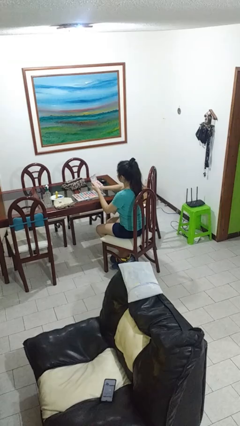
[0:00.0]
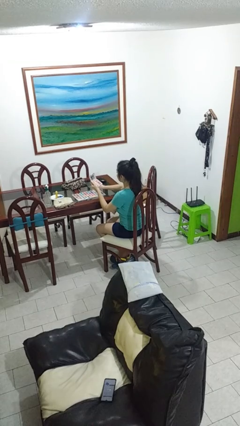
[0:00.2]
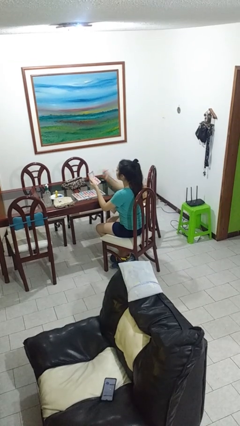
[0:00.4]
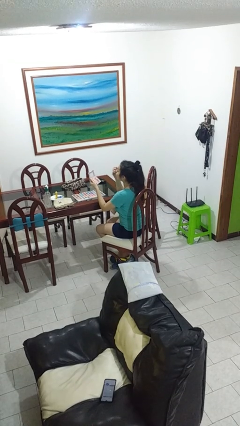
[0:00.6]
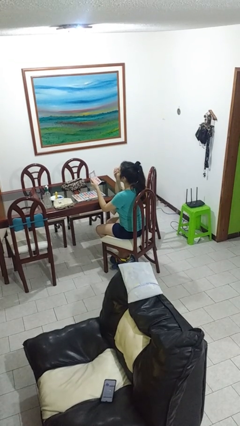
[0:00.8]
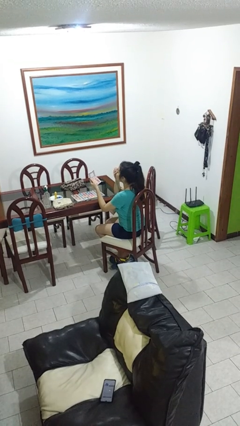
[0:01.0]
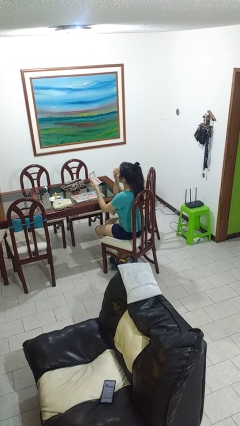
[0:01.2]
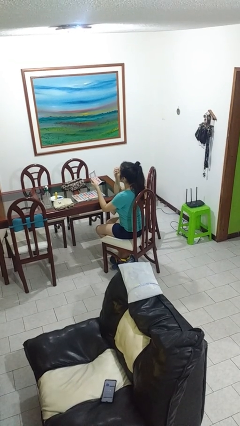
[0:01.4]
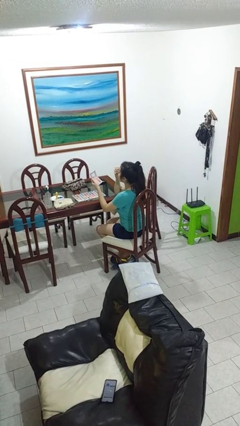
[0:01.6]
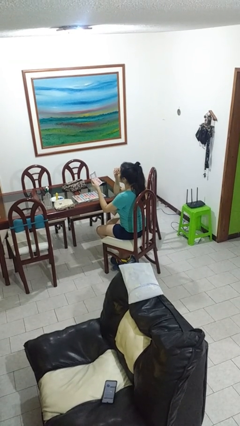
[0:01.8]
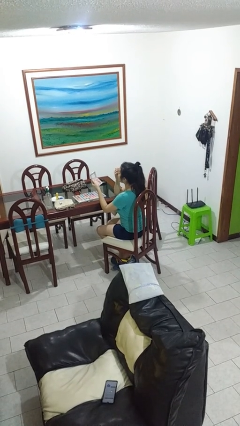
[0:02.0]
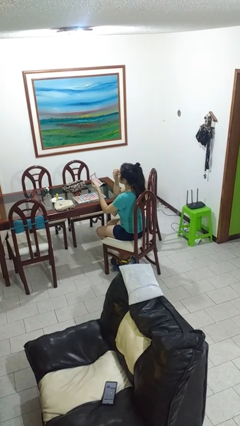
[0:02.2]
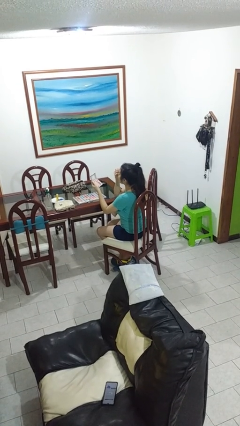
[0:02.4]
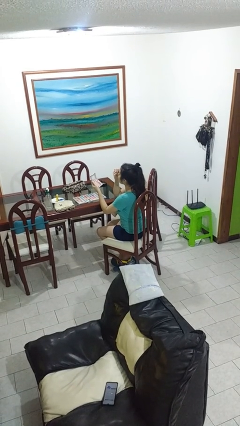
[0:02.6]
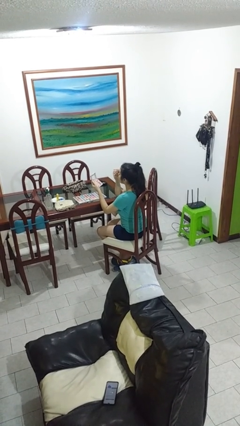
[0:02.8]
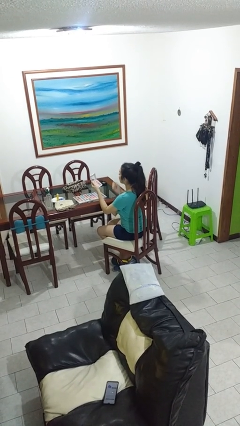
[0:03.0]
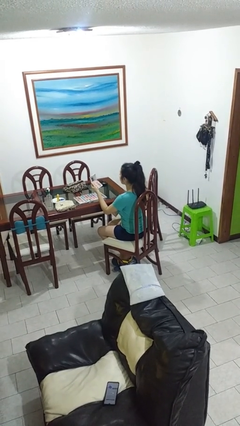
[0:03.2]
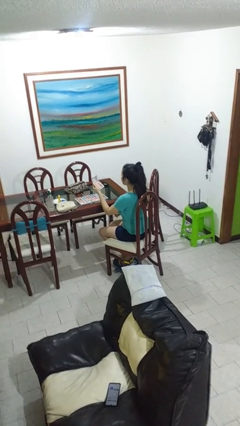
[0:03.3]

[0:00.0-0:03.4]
person applies eye makeup

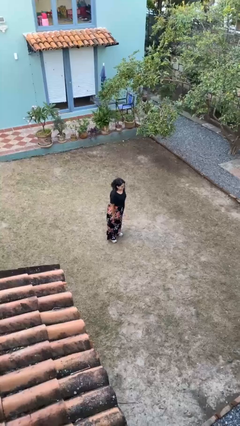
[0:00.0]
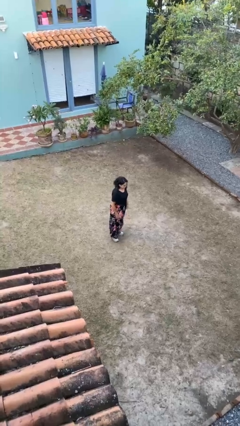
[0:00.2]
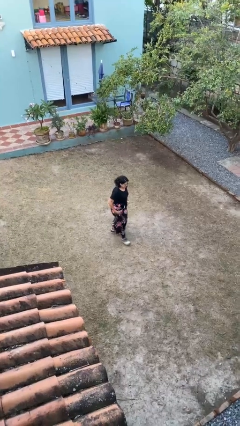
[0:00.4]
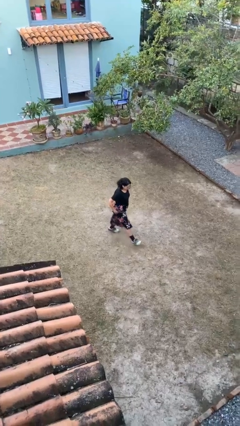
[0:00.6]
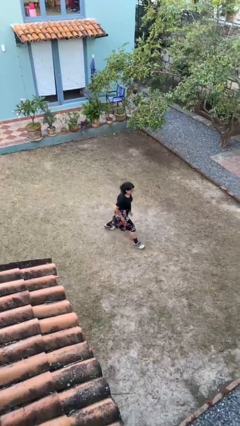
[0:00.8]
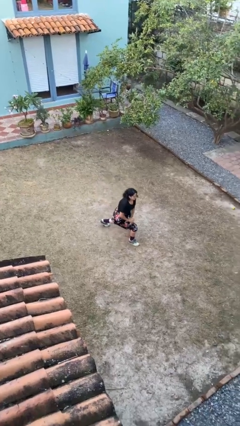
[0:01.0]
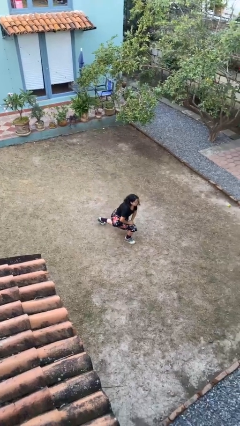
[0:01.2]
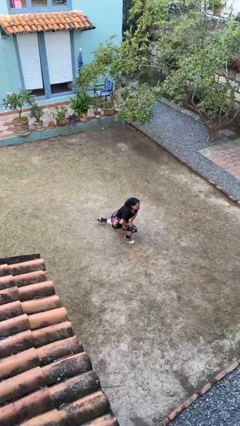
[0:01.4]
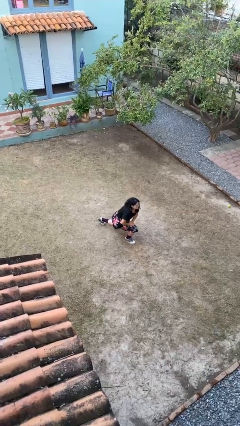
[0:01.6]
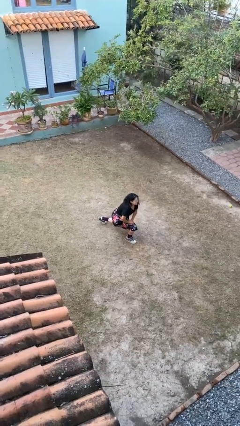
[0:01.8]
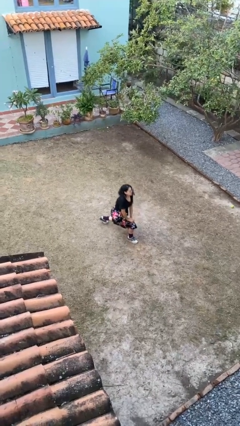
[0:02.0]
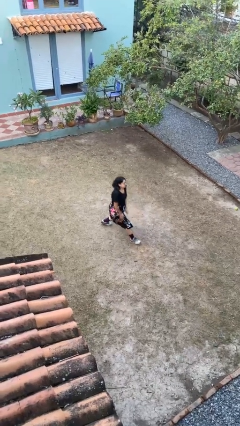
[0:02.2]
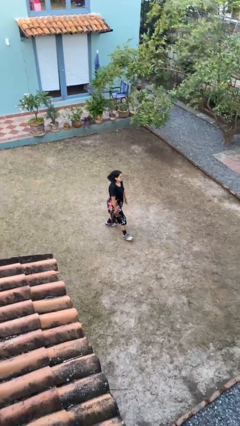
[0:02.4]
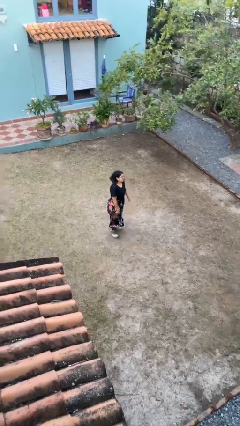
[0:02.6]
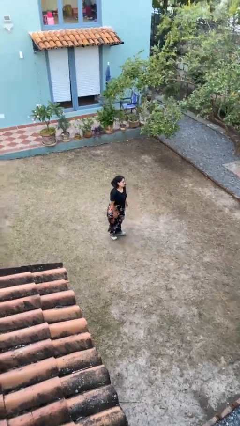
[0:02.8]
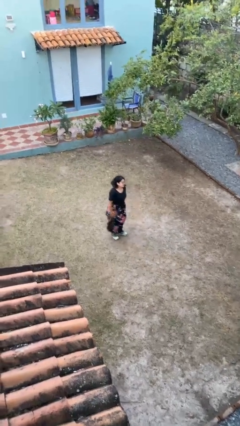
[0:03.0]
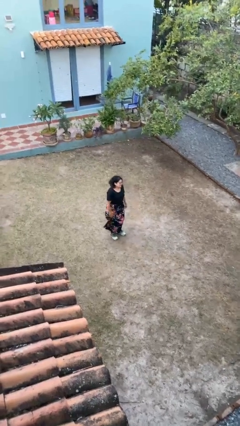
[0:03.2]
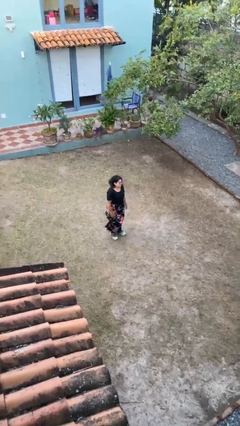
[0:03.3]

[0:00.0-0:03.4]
person exercises with lunges

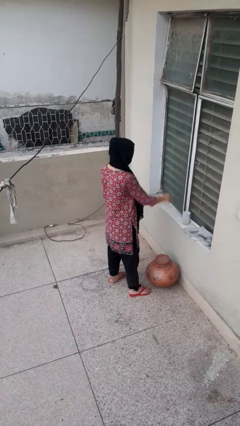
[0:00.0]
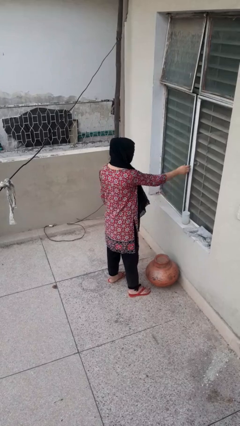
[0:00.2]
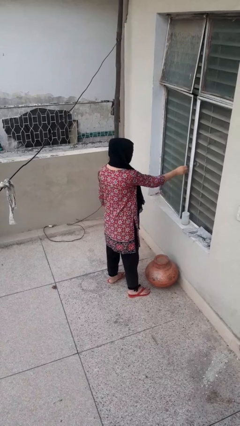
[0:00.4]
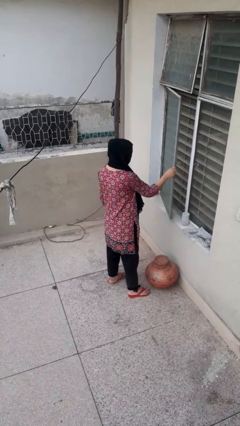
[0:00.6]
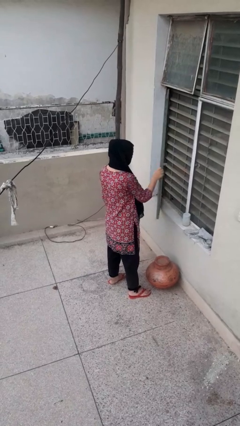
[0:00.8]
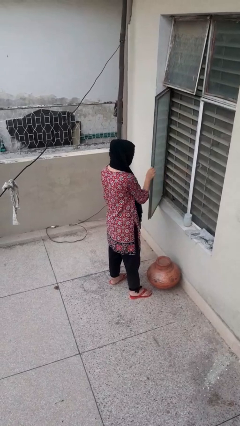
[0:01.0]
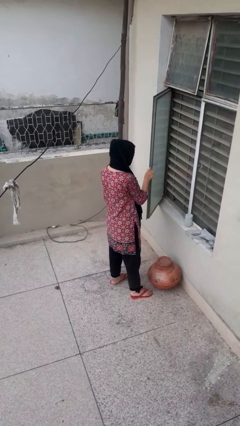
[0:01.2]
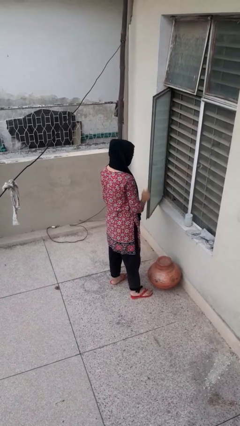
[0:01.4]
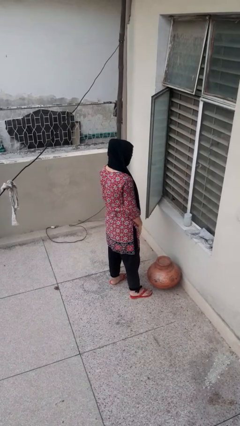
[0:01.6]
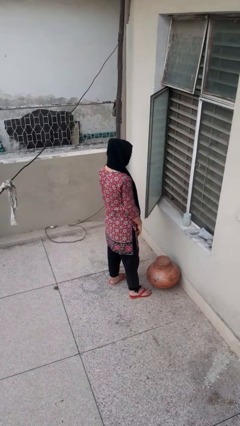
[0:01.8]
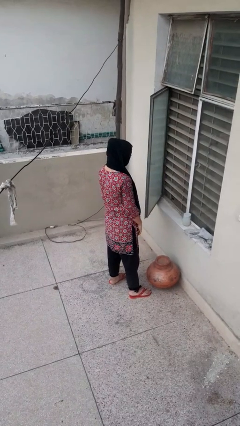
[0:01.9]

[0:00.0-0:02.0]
person opens home window

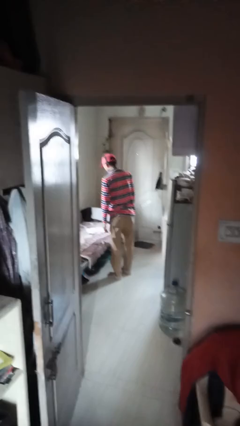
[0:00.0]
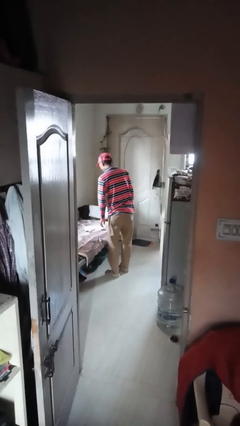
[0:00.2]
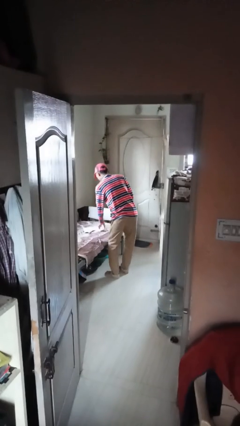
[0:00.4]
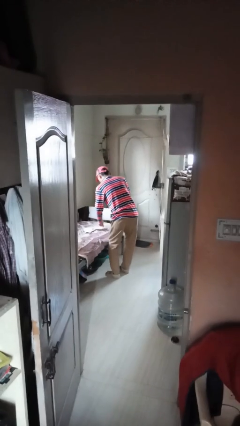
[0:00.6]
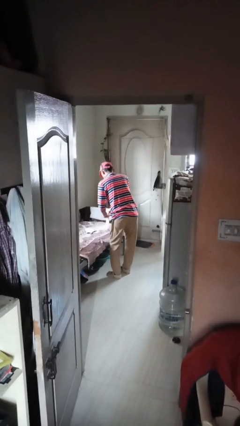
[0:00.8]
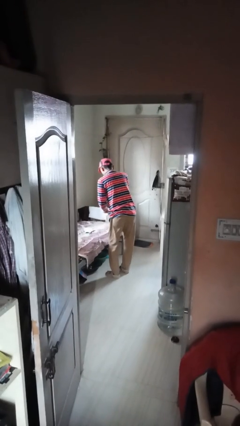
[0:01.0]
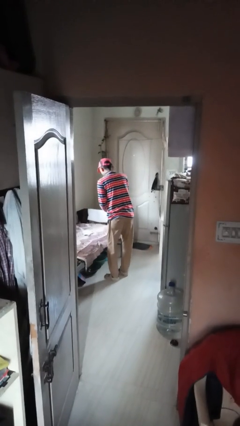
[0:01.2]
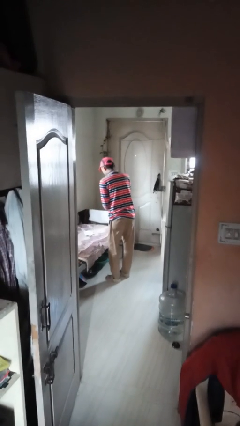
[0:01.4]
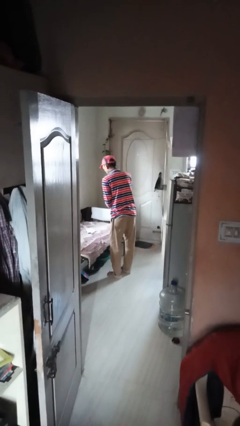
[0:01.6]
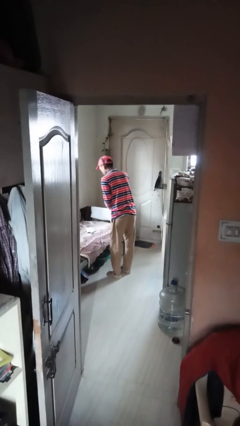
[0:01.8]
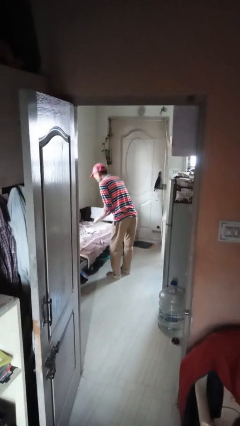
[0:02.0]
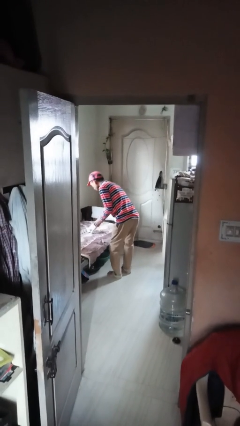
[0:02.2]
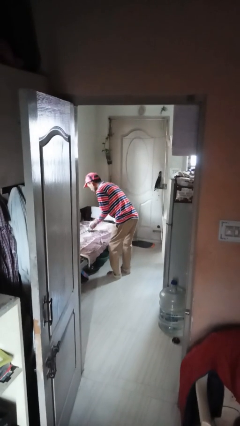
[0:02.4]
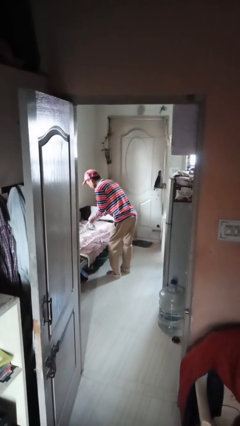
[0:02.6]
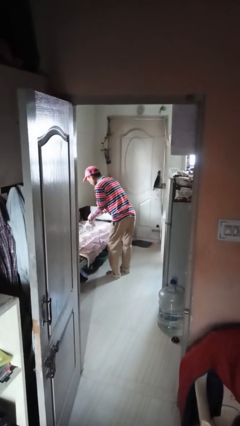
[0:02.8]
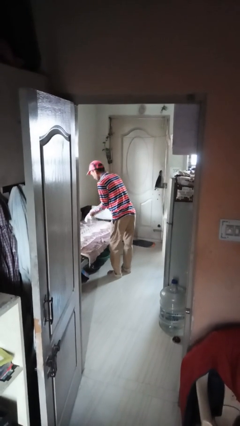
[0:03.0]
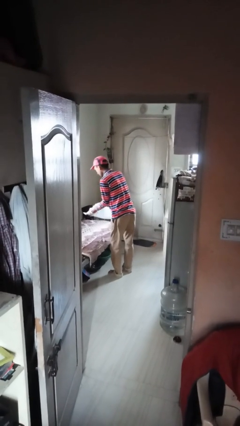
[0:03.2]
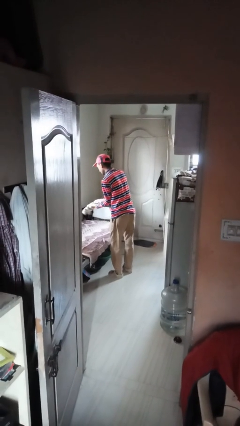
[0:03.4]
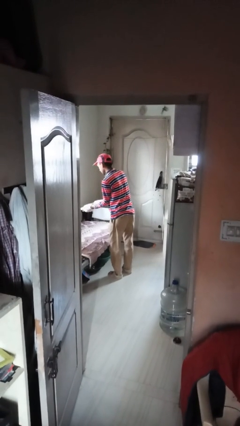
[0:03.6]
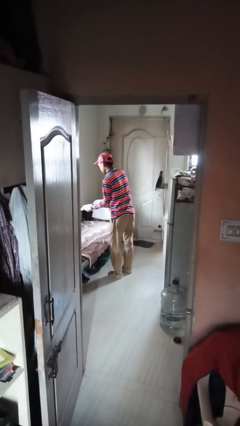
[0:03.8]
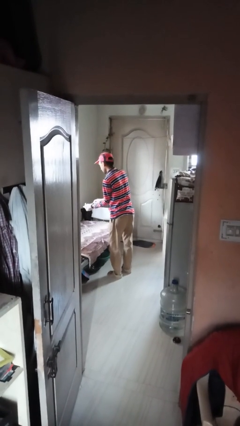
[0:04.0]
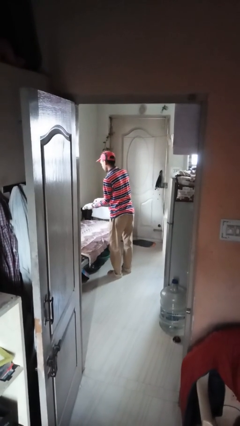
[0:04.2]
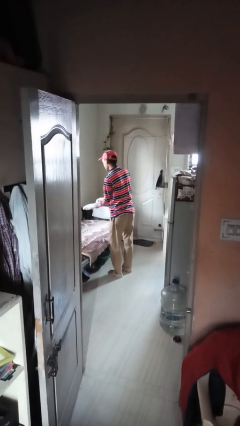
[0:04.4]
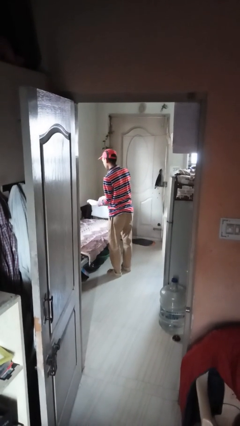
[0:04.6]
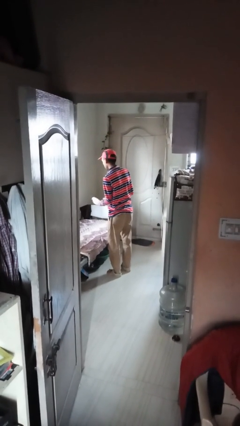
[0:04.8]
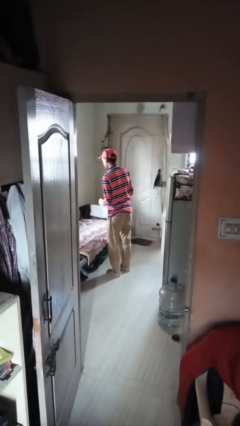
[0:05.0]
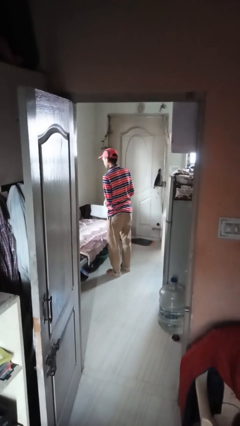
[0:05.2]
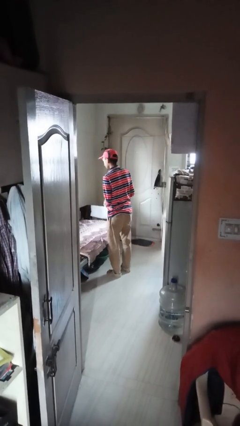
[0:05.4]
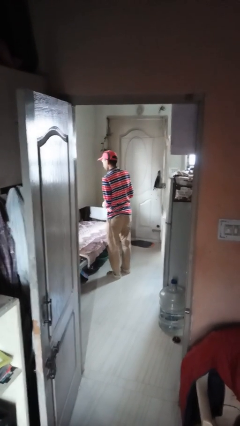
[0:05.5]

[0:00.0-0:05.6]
person puts on gloves

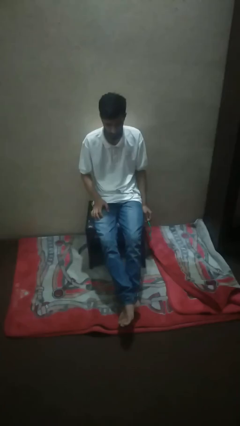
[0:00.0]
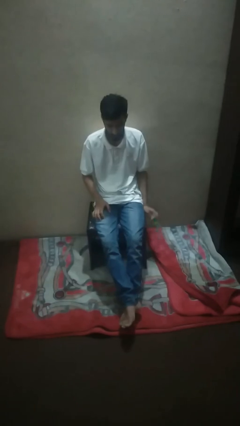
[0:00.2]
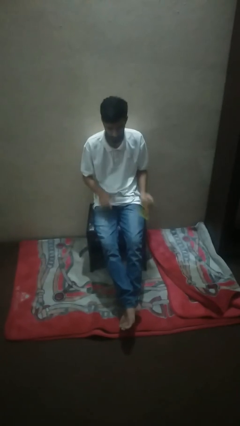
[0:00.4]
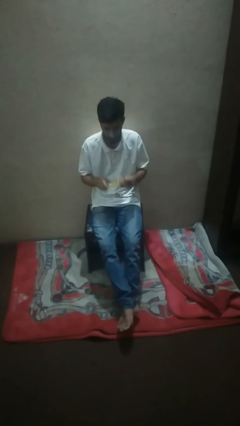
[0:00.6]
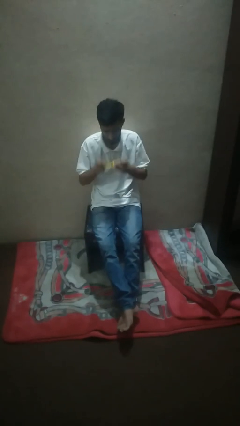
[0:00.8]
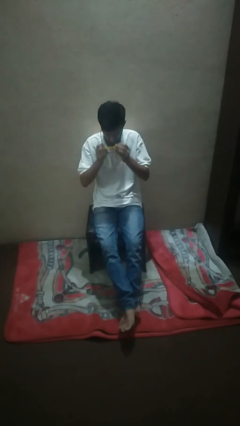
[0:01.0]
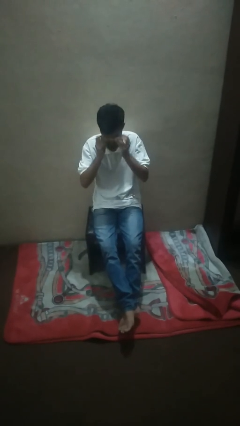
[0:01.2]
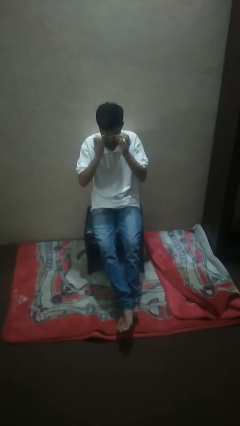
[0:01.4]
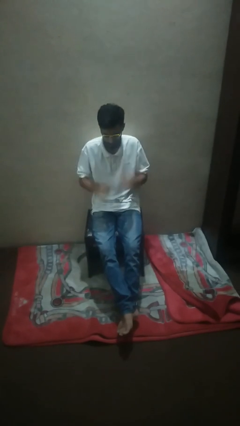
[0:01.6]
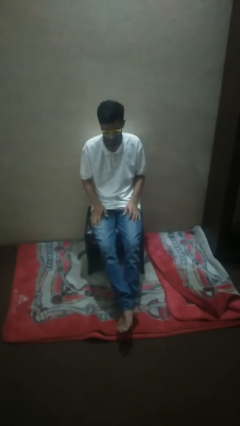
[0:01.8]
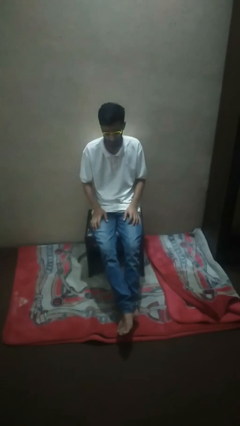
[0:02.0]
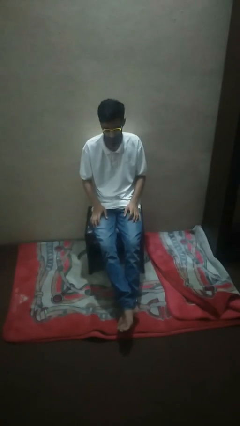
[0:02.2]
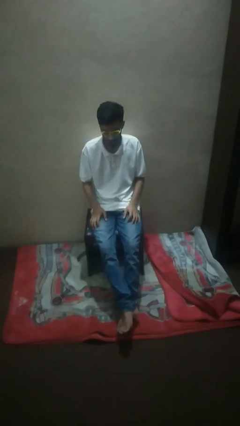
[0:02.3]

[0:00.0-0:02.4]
person puts on sunglasses

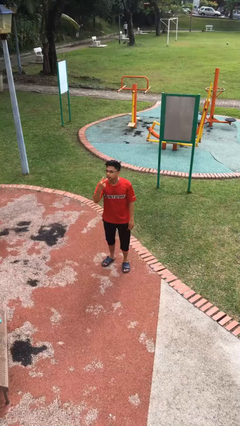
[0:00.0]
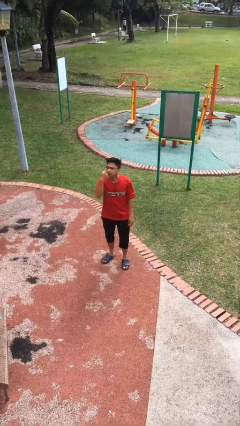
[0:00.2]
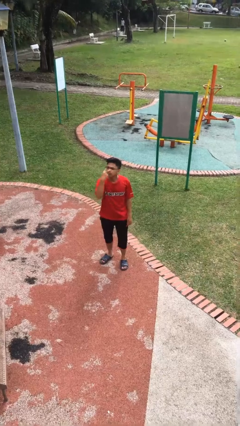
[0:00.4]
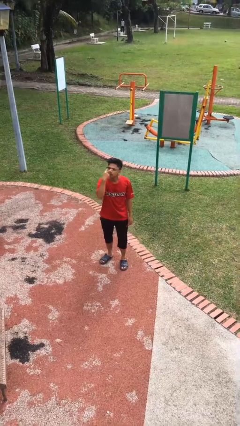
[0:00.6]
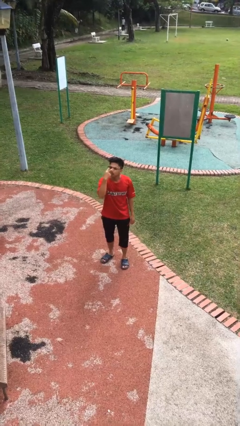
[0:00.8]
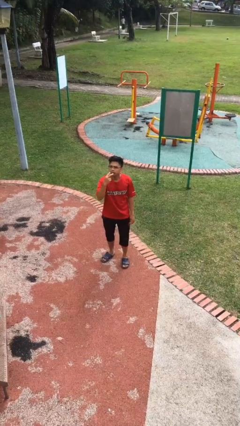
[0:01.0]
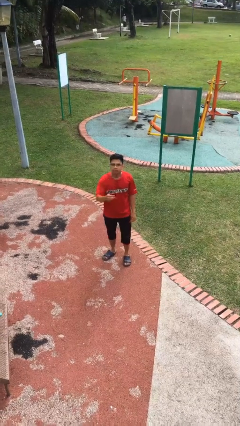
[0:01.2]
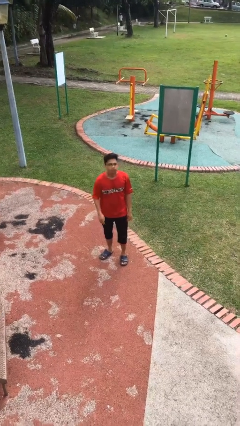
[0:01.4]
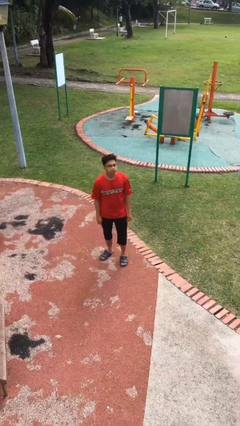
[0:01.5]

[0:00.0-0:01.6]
person gestures watch closely
